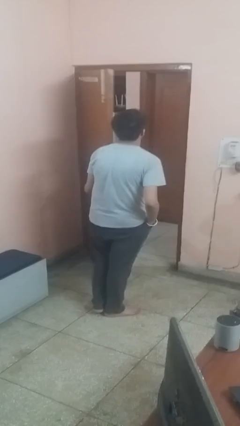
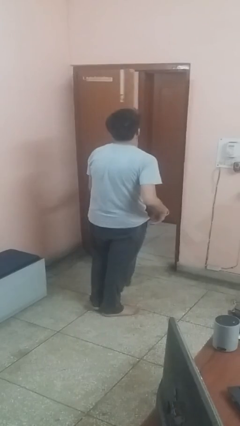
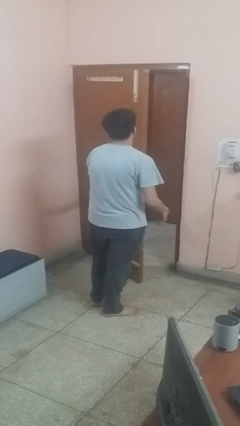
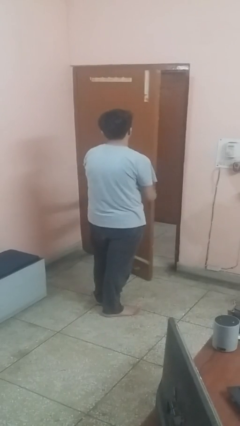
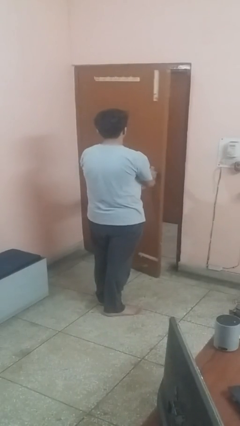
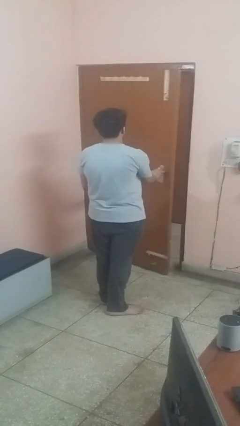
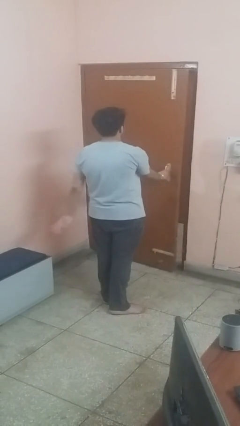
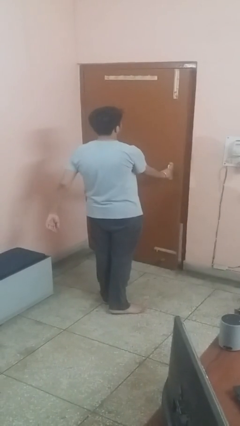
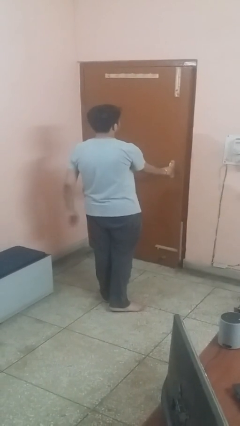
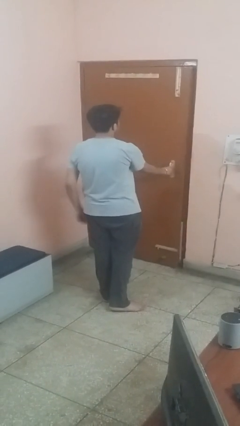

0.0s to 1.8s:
person closes facility door

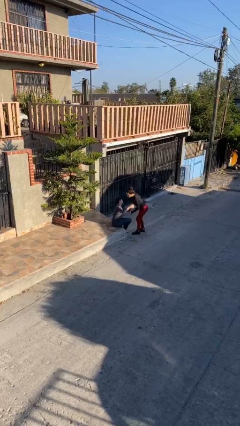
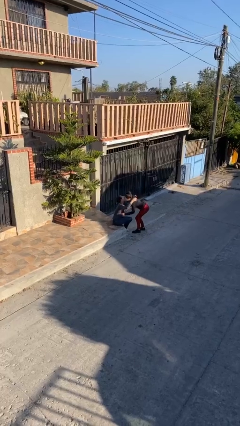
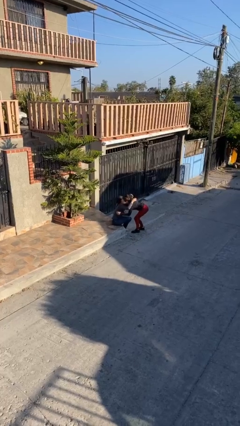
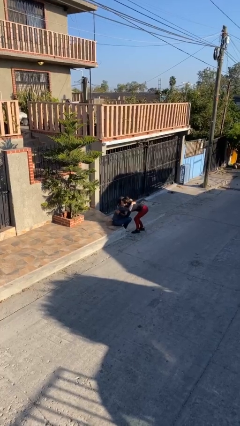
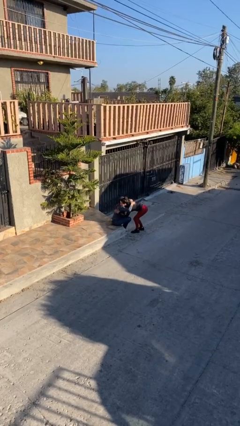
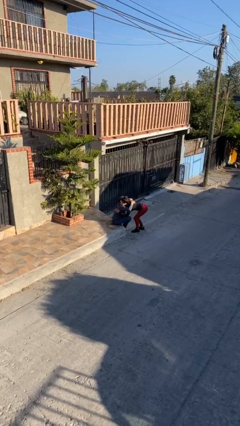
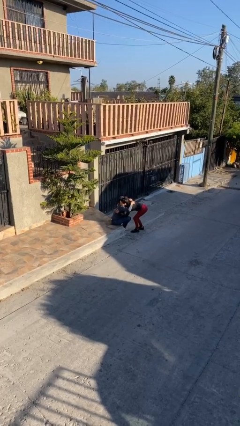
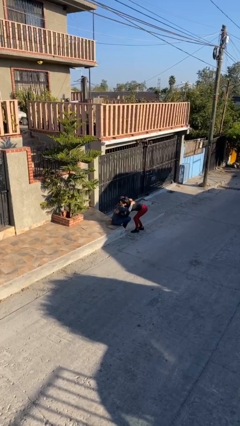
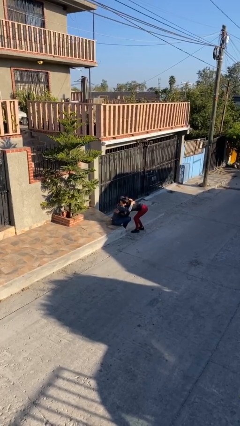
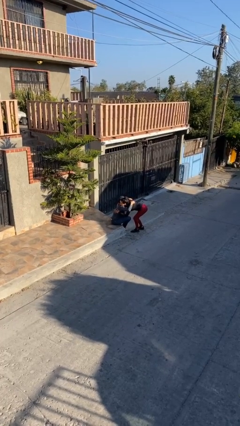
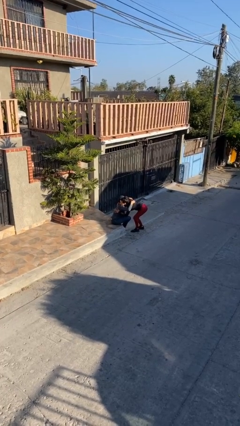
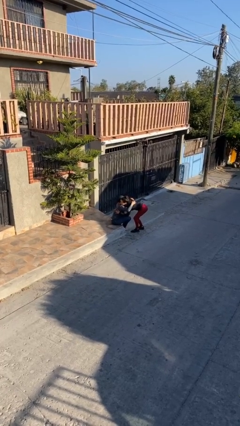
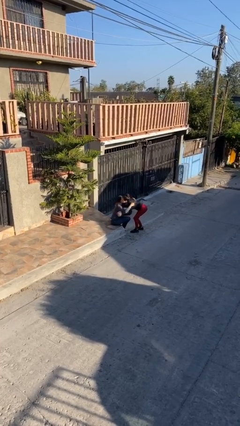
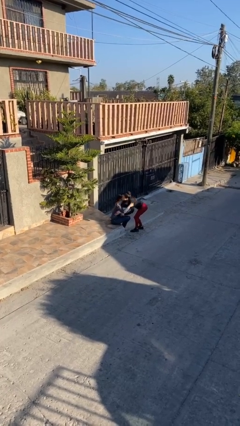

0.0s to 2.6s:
person embraces person

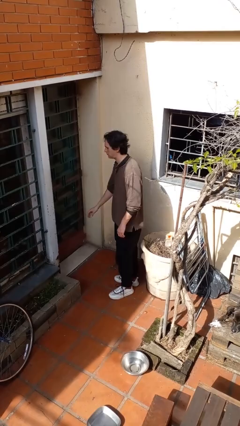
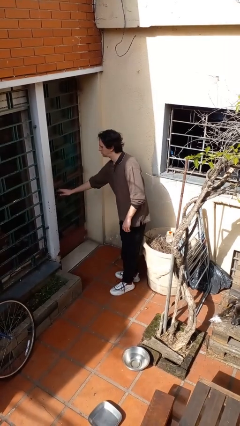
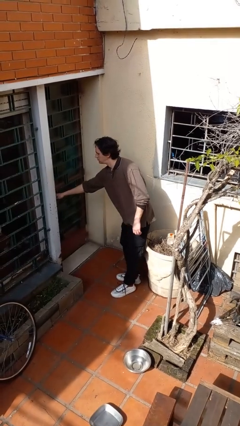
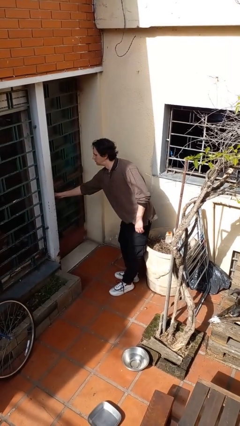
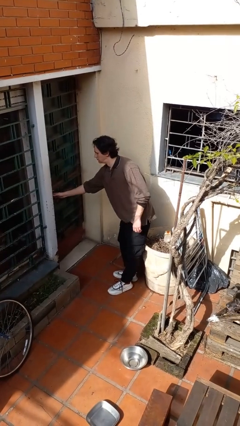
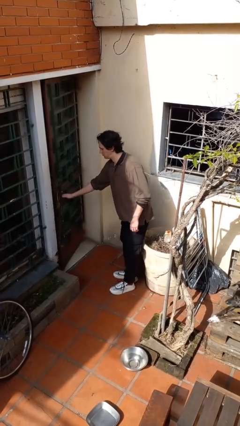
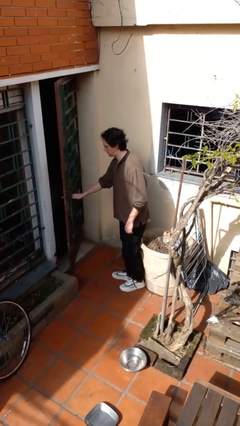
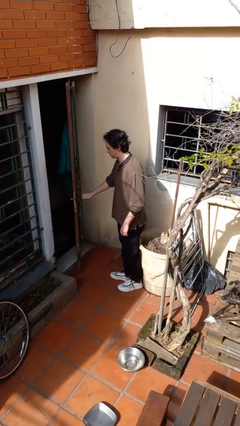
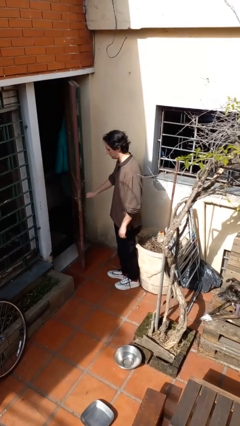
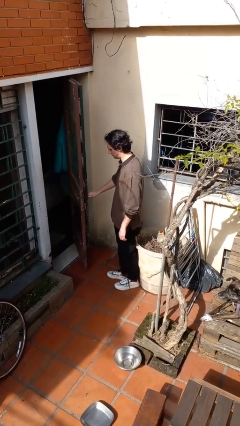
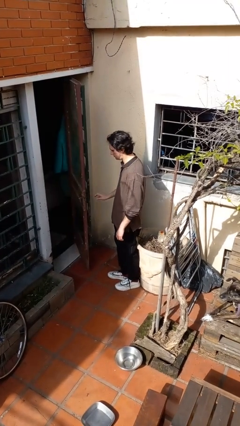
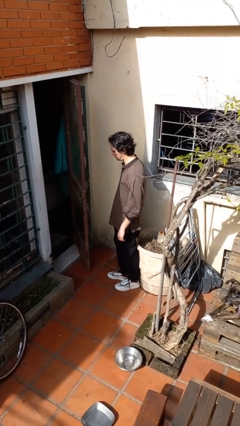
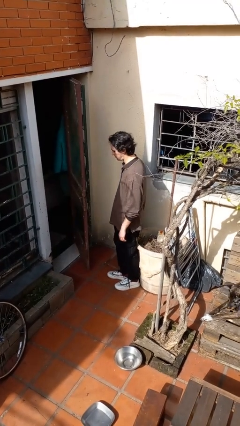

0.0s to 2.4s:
person opens facility door

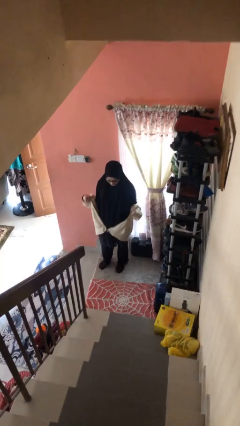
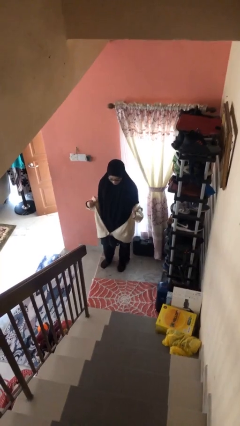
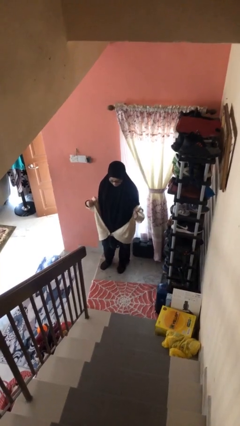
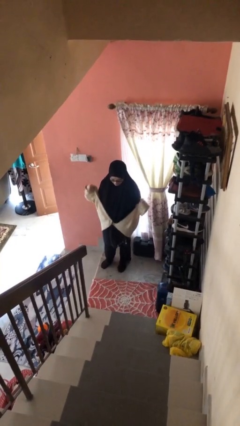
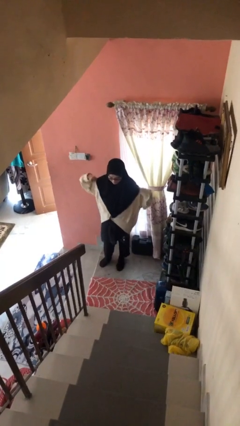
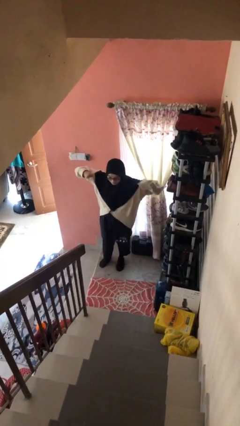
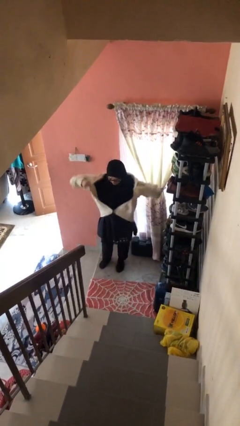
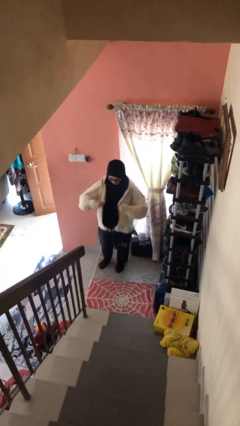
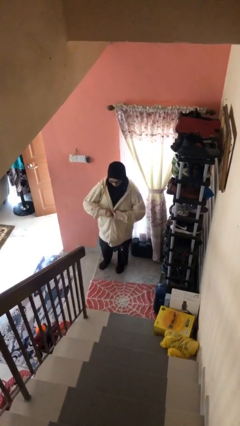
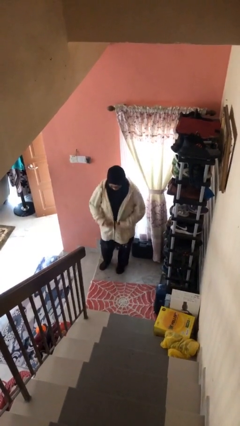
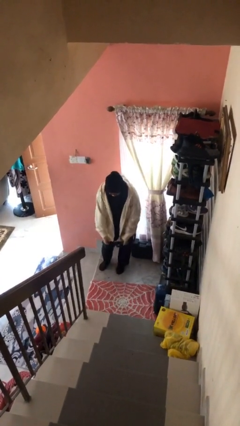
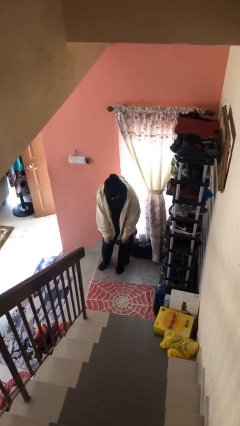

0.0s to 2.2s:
person puts on jacket

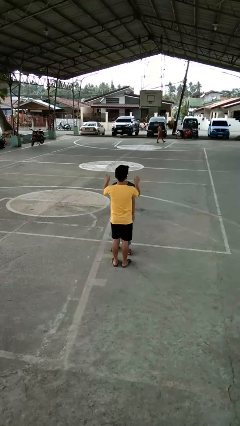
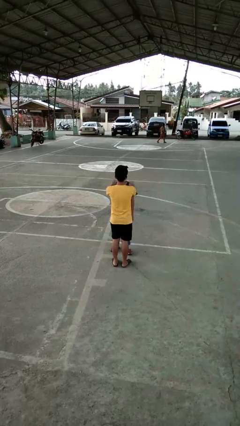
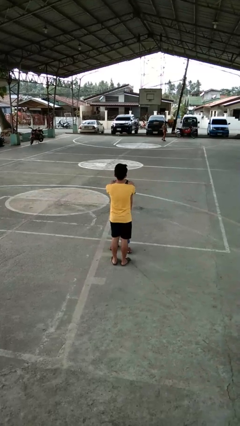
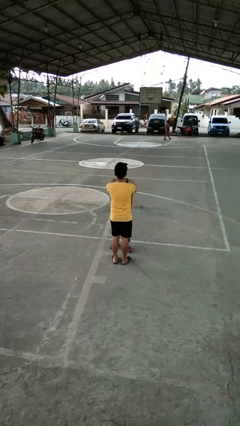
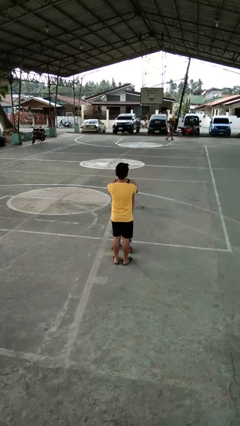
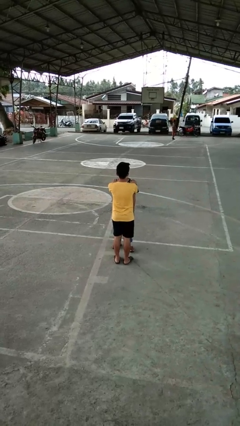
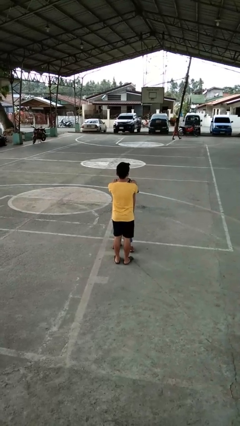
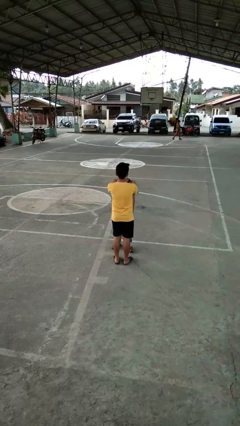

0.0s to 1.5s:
person grabs person by shoulder

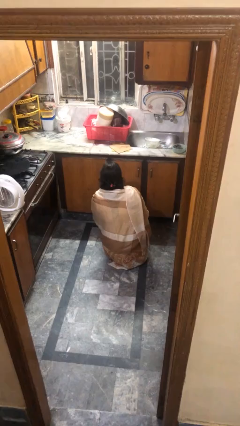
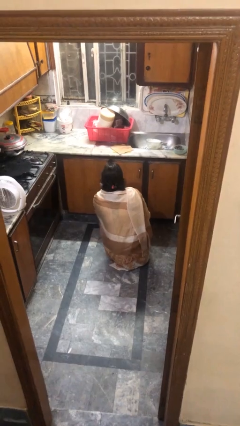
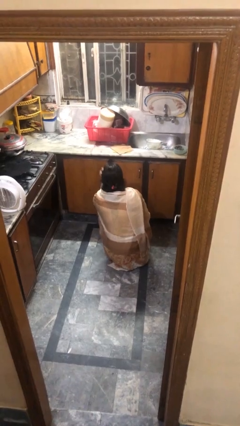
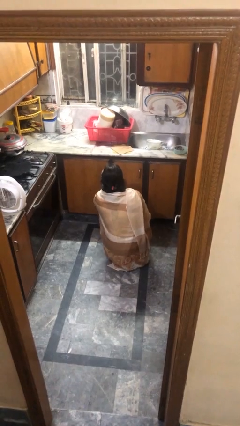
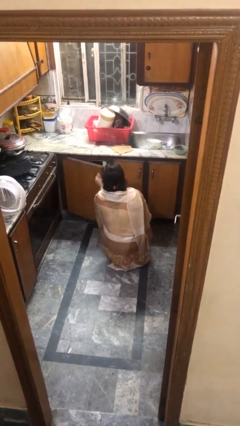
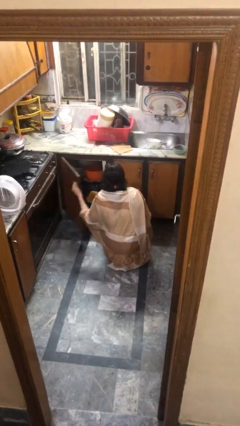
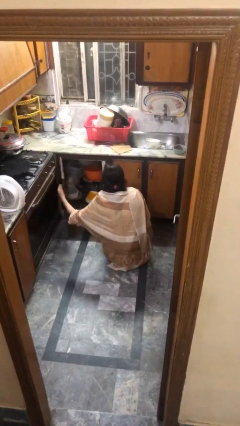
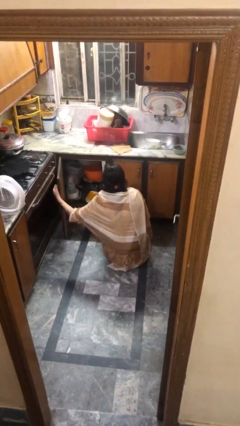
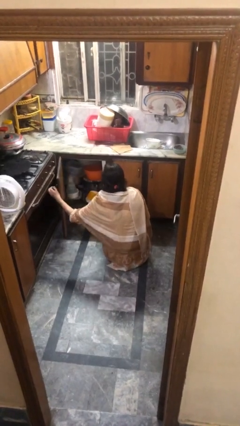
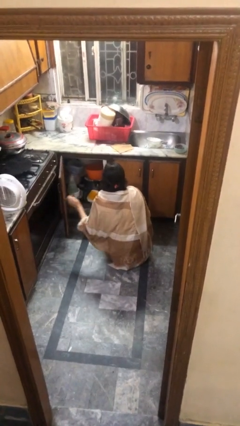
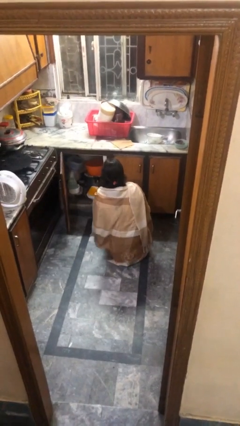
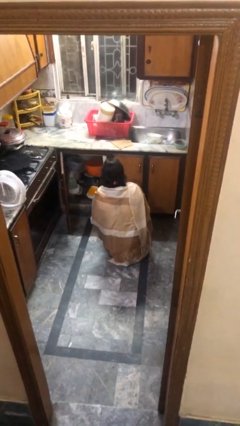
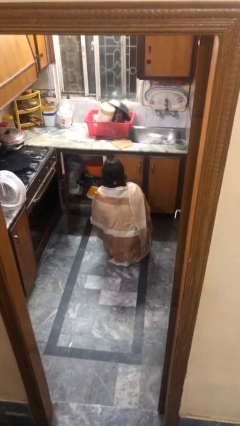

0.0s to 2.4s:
person opens kitchen drawer

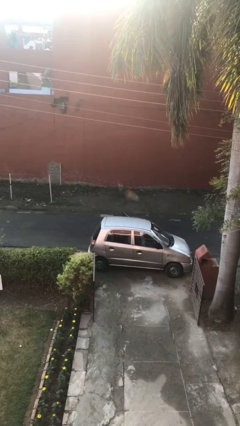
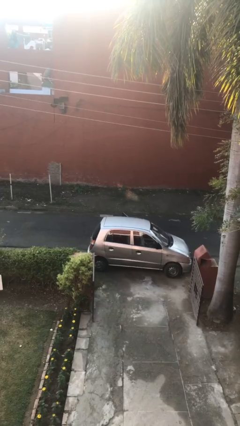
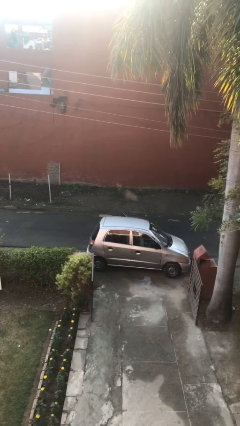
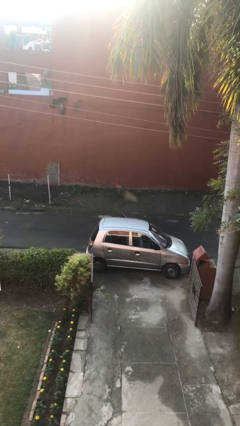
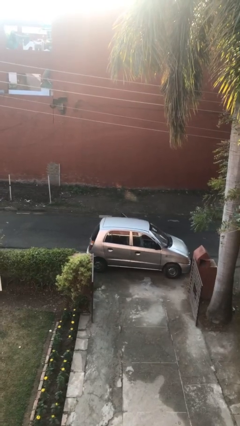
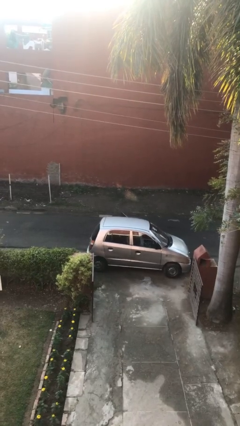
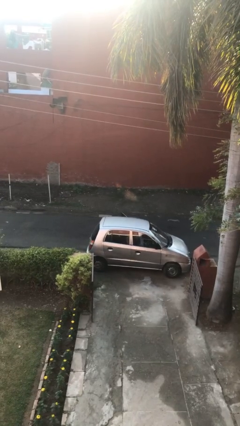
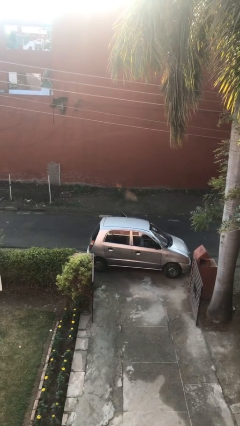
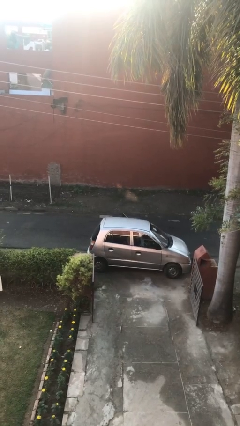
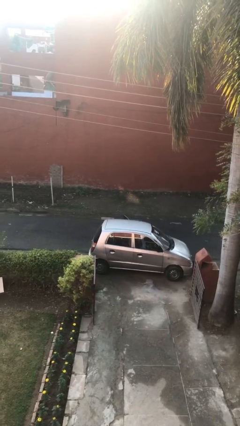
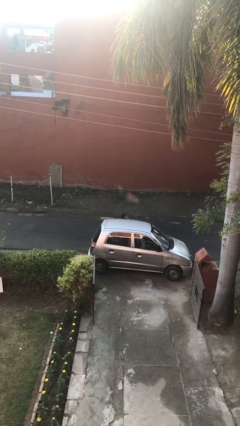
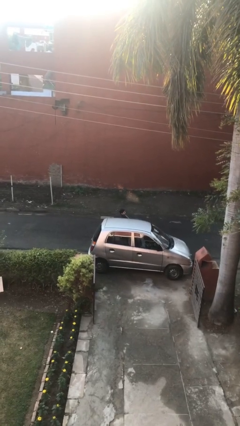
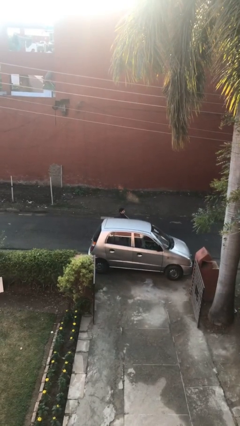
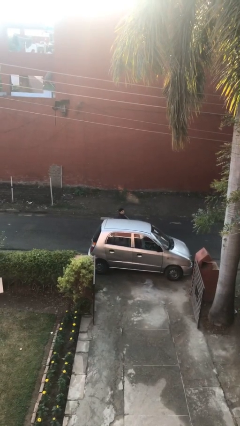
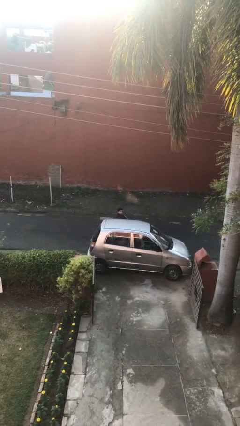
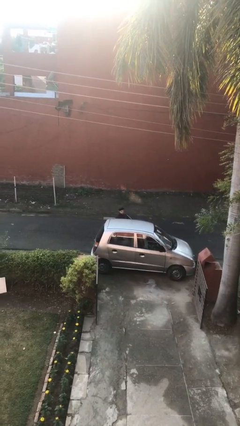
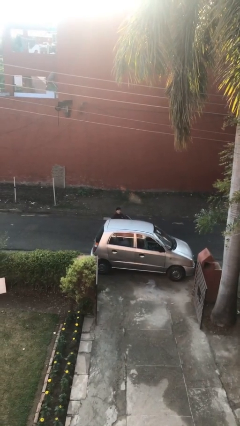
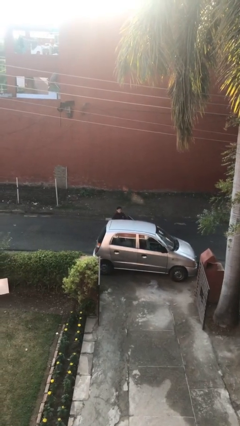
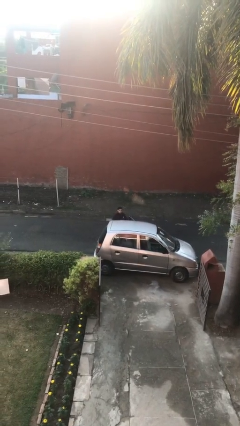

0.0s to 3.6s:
person exits car

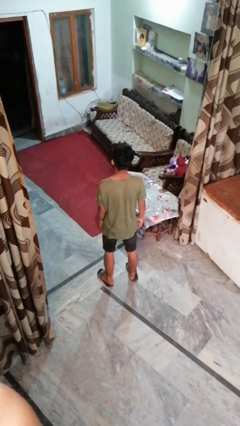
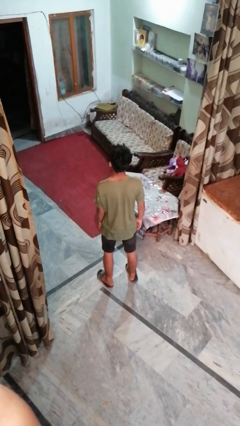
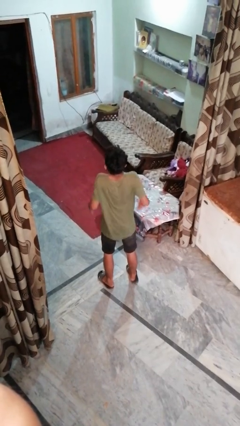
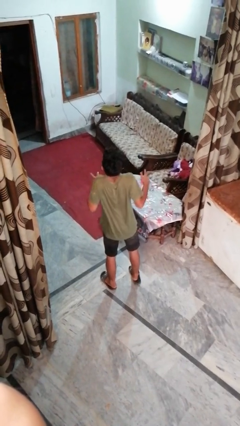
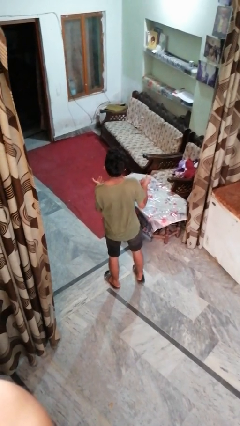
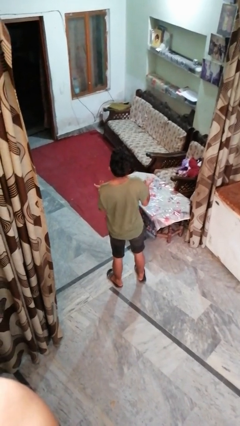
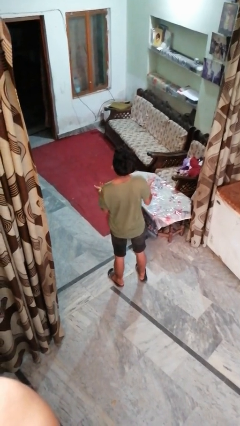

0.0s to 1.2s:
person shrugs
